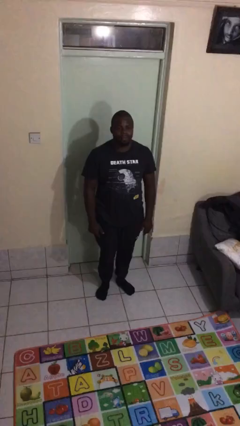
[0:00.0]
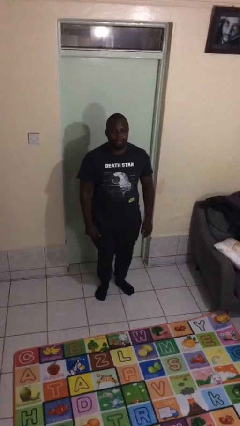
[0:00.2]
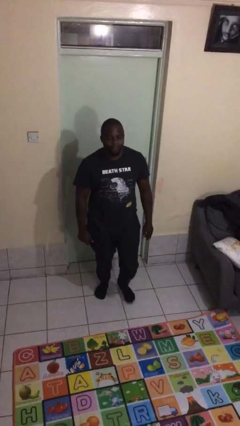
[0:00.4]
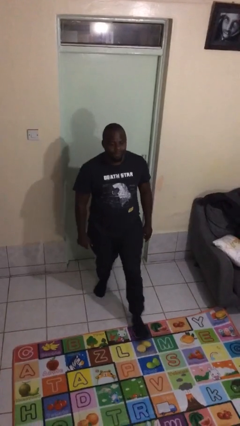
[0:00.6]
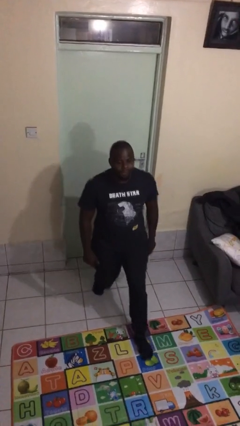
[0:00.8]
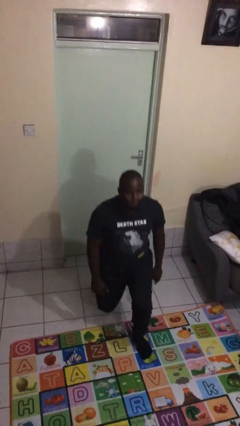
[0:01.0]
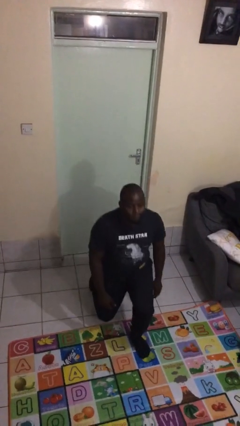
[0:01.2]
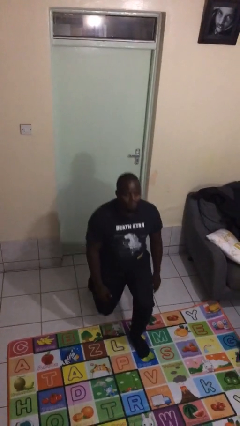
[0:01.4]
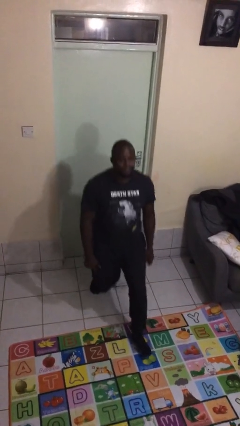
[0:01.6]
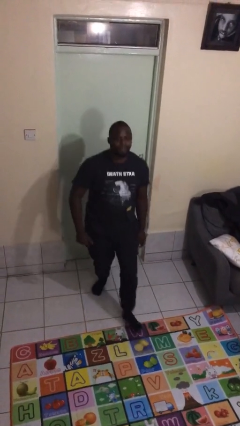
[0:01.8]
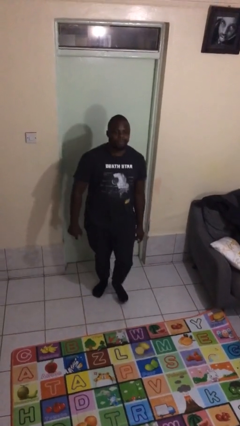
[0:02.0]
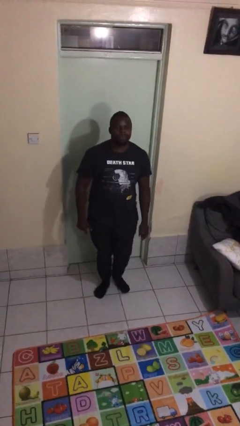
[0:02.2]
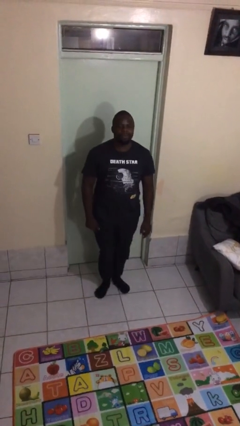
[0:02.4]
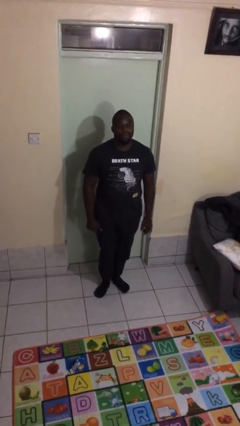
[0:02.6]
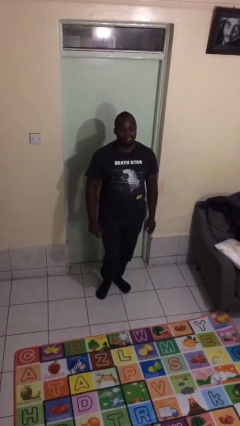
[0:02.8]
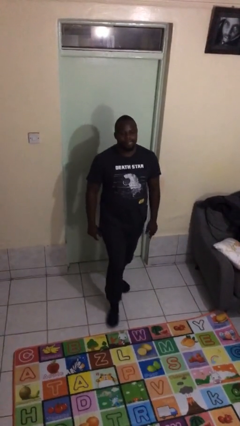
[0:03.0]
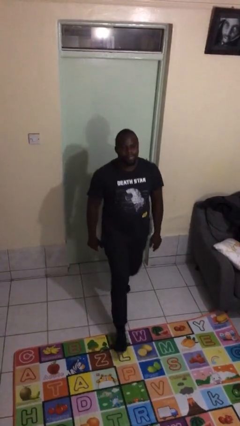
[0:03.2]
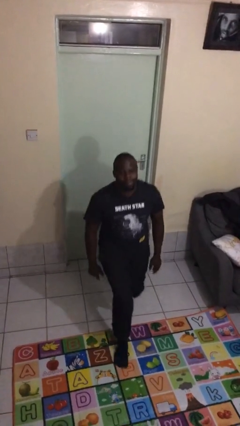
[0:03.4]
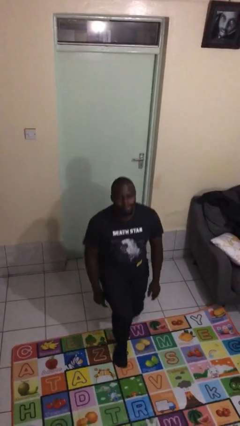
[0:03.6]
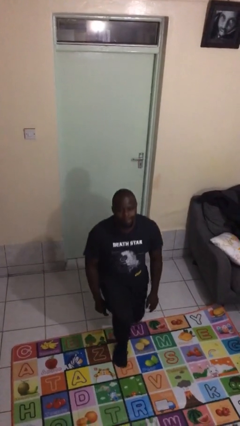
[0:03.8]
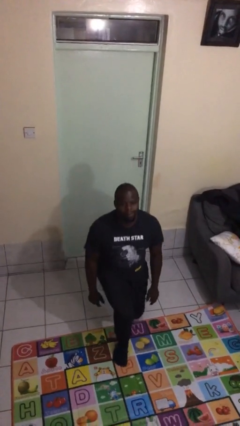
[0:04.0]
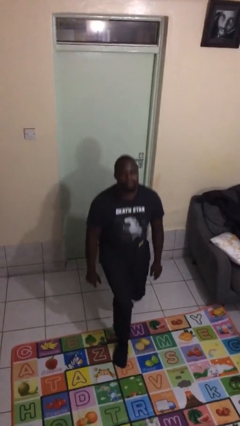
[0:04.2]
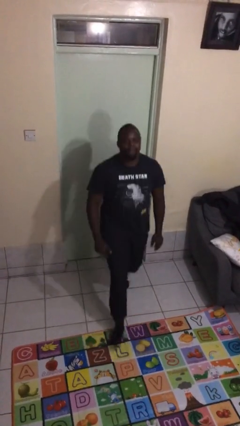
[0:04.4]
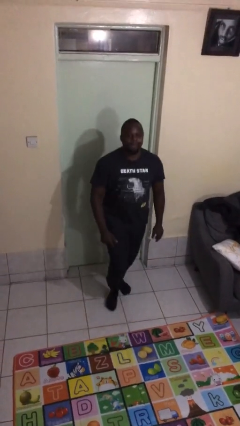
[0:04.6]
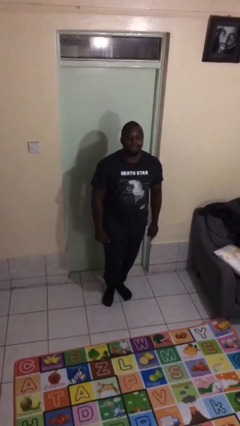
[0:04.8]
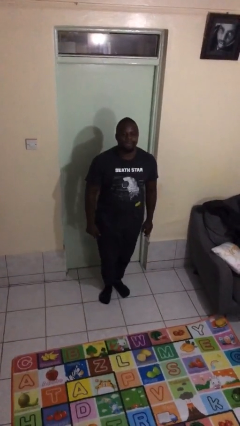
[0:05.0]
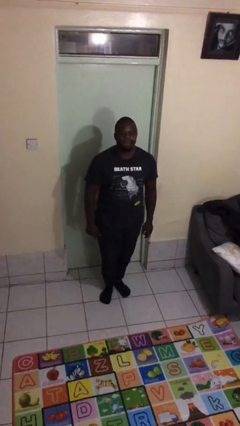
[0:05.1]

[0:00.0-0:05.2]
person exercises with lunges

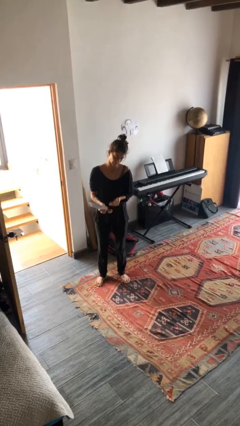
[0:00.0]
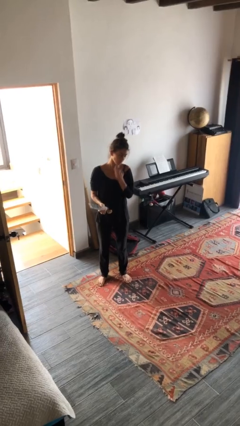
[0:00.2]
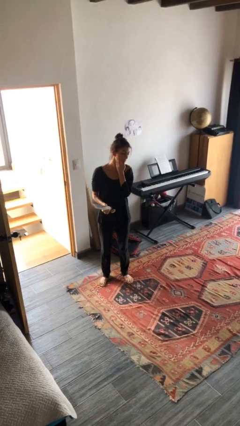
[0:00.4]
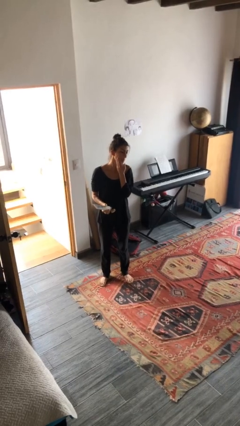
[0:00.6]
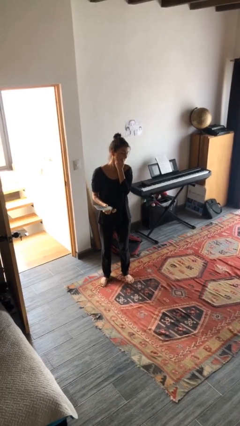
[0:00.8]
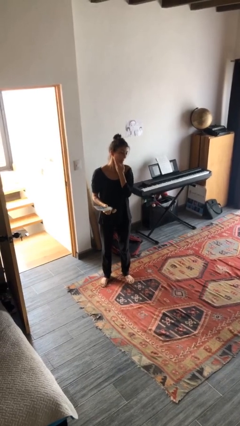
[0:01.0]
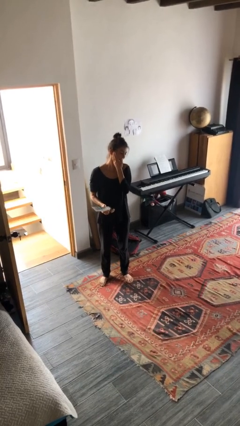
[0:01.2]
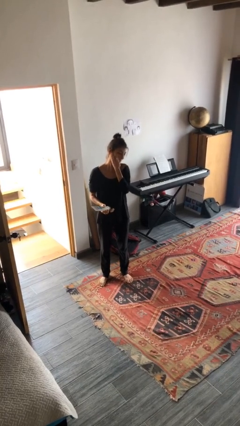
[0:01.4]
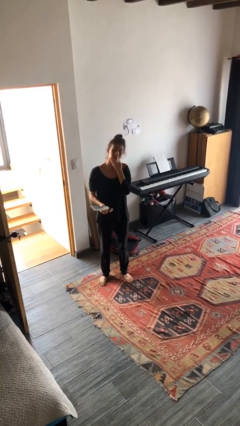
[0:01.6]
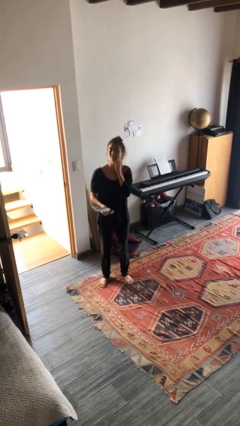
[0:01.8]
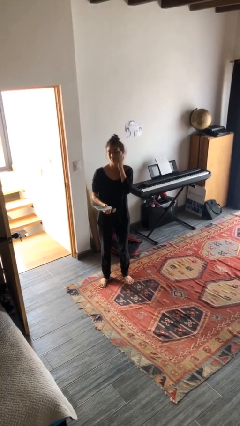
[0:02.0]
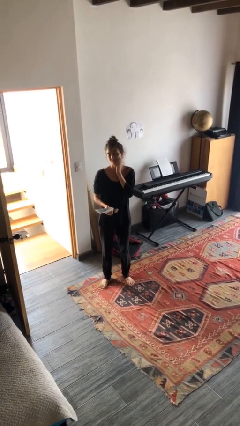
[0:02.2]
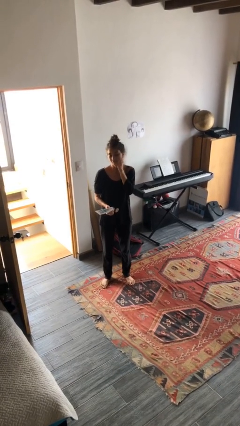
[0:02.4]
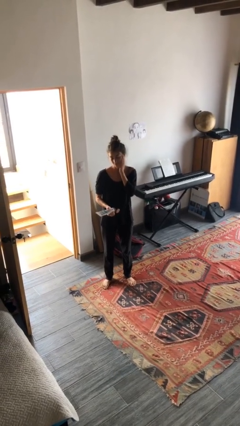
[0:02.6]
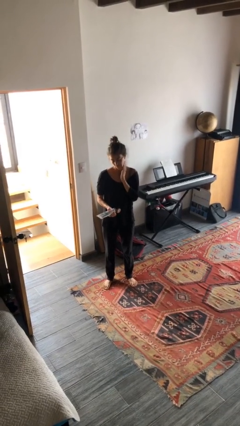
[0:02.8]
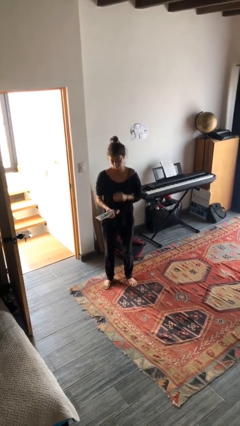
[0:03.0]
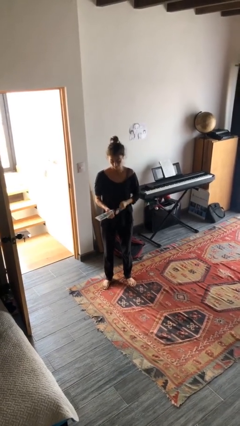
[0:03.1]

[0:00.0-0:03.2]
person applies sunscreen

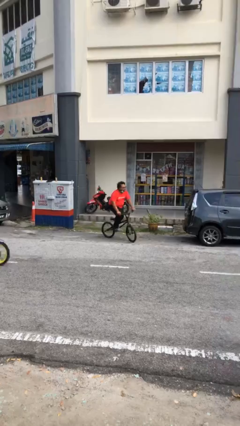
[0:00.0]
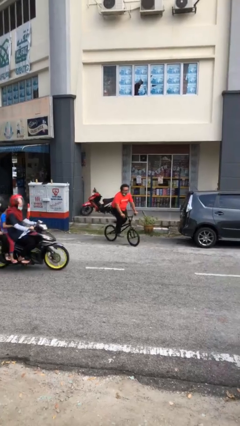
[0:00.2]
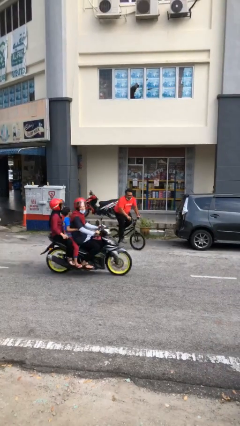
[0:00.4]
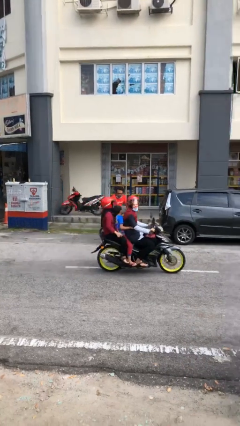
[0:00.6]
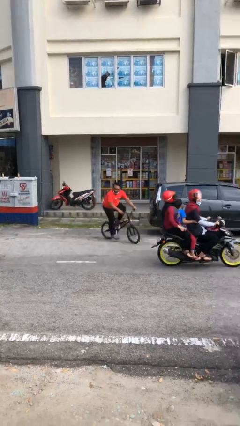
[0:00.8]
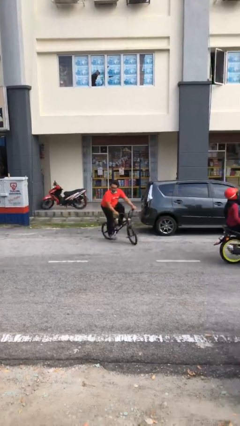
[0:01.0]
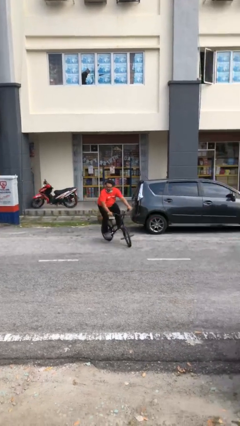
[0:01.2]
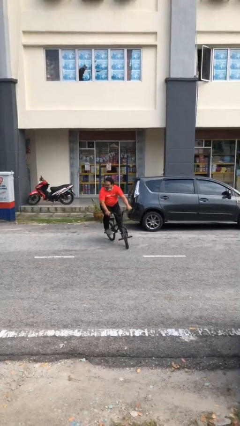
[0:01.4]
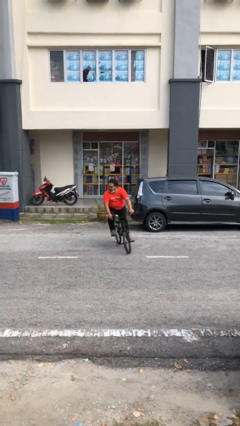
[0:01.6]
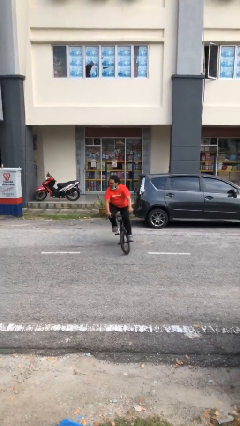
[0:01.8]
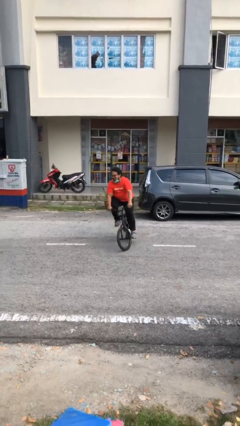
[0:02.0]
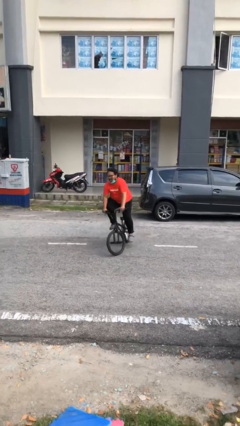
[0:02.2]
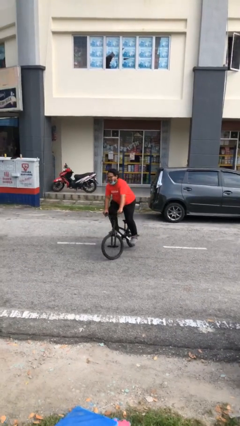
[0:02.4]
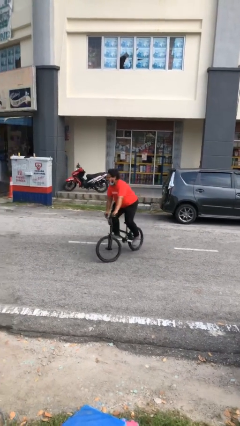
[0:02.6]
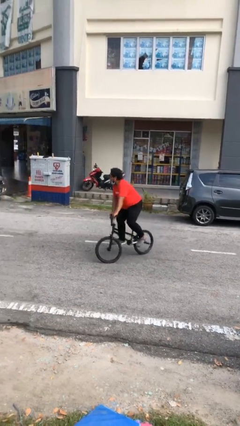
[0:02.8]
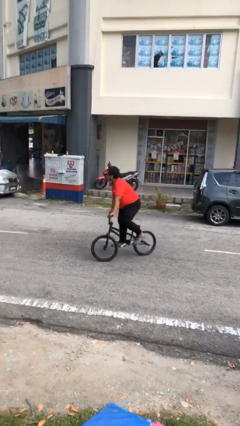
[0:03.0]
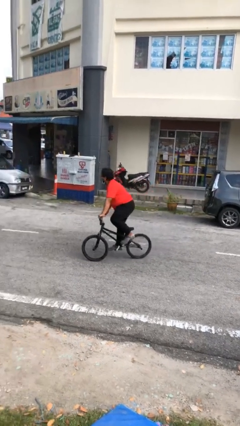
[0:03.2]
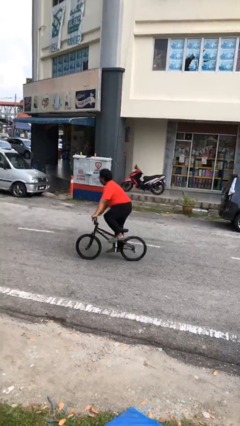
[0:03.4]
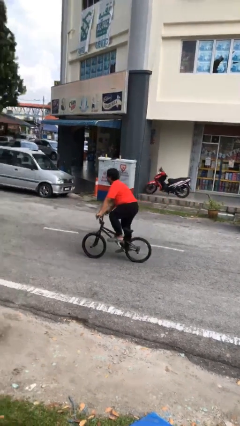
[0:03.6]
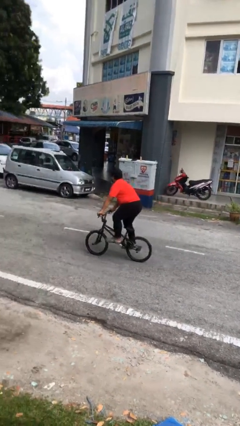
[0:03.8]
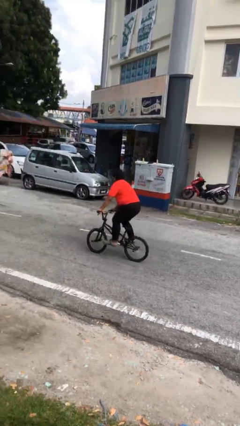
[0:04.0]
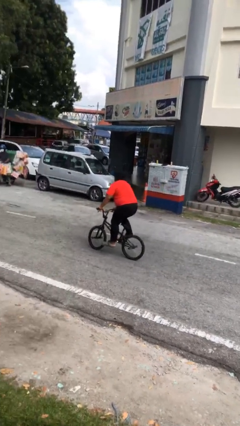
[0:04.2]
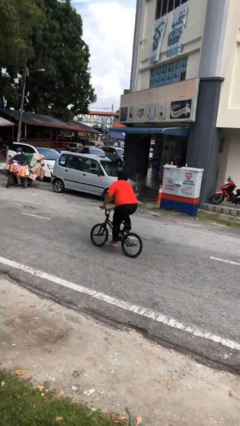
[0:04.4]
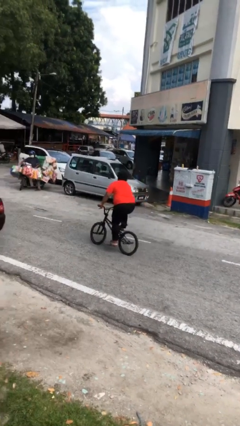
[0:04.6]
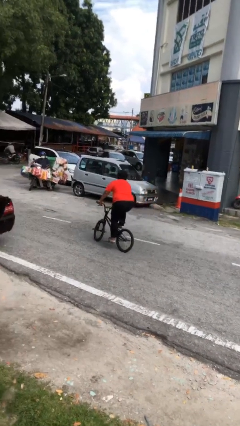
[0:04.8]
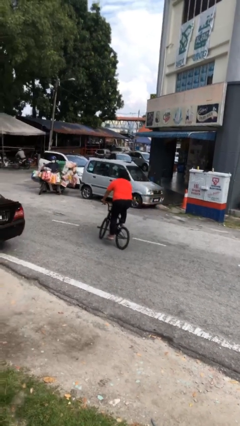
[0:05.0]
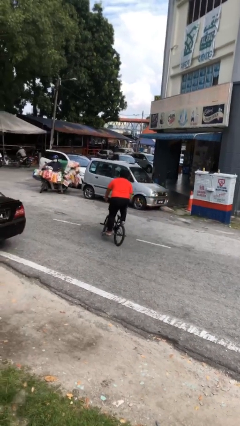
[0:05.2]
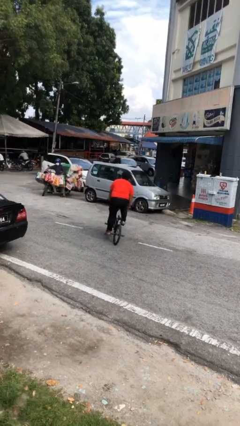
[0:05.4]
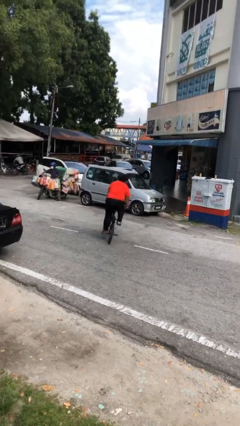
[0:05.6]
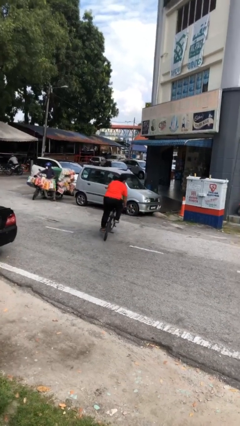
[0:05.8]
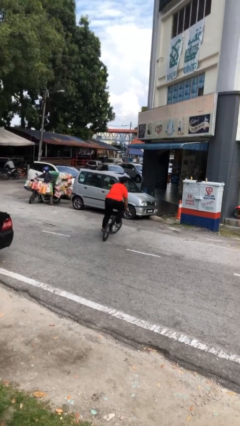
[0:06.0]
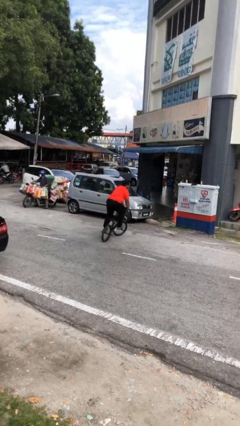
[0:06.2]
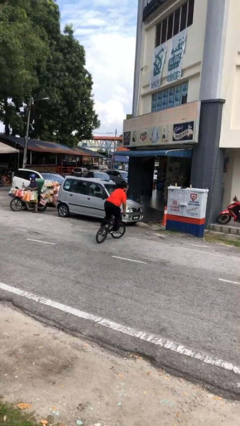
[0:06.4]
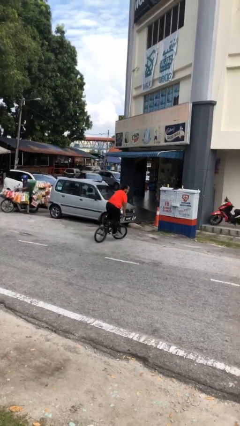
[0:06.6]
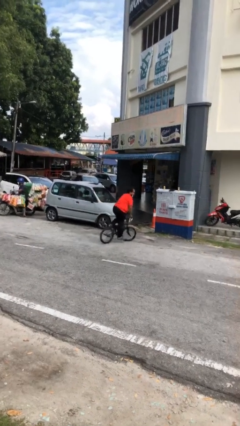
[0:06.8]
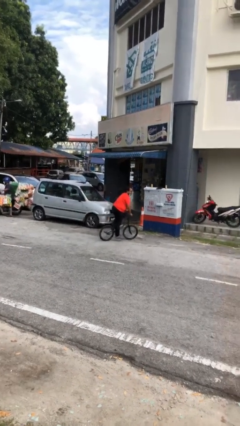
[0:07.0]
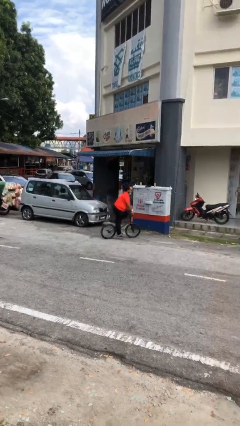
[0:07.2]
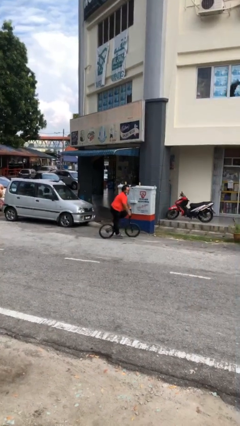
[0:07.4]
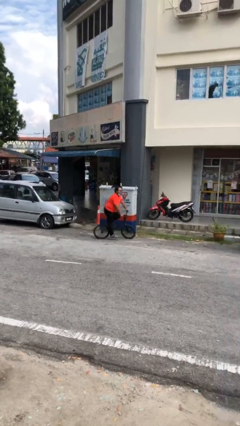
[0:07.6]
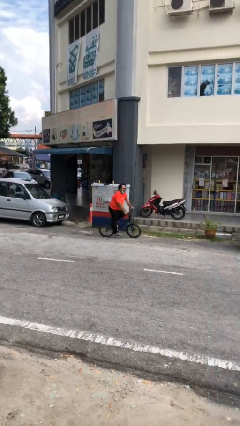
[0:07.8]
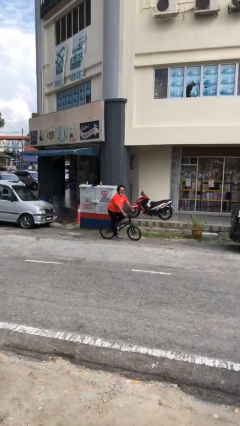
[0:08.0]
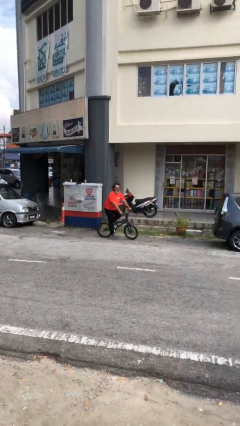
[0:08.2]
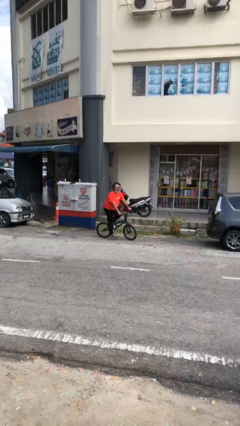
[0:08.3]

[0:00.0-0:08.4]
person rides bicycle

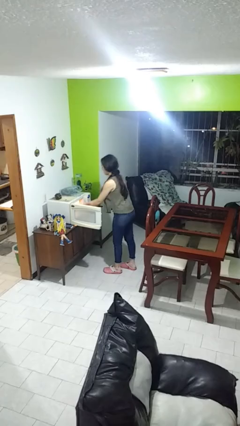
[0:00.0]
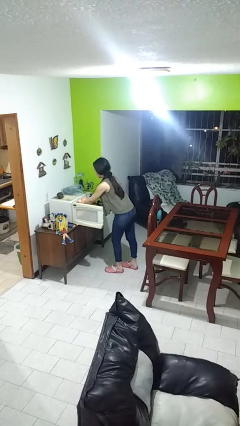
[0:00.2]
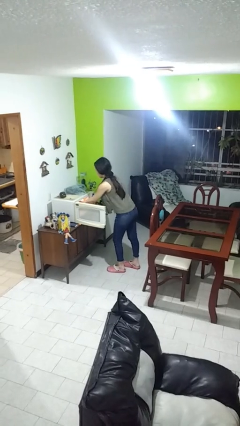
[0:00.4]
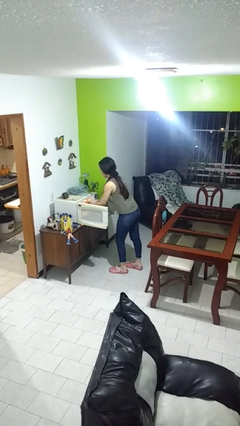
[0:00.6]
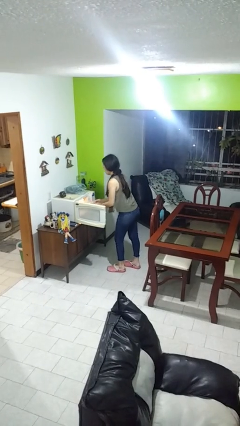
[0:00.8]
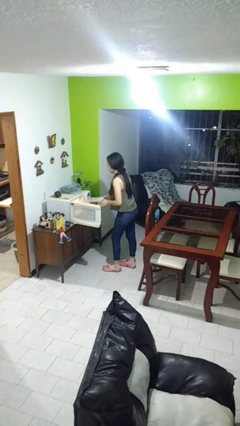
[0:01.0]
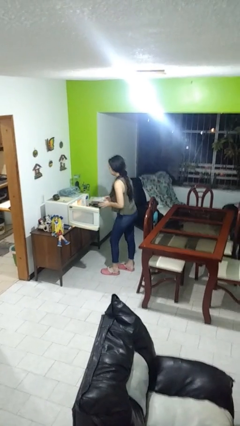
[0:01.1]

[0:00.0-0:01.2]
person takes object from microwave
